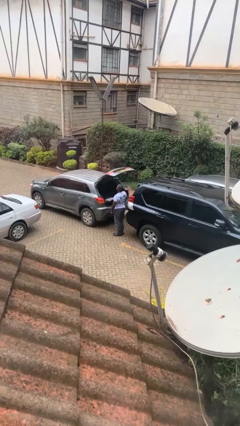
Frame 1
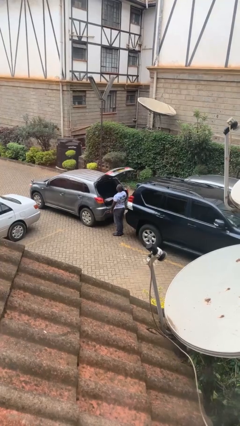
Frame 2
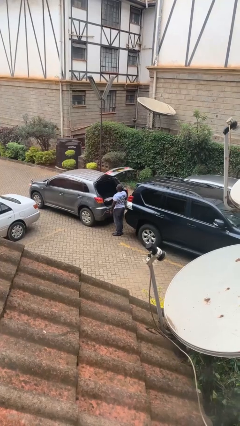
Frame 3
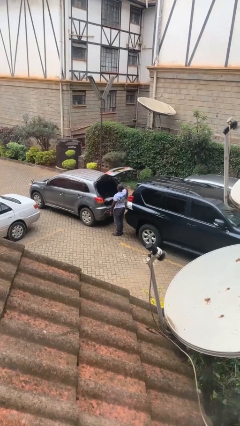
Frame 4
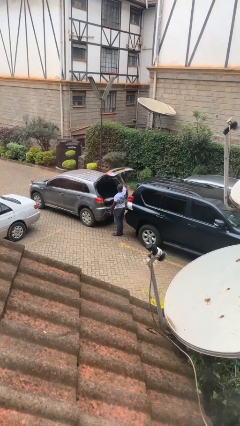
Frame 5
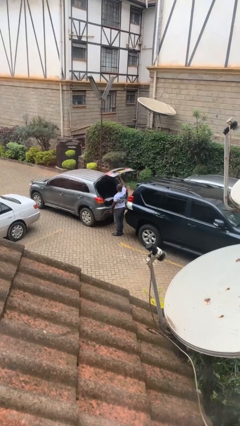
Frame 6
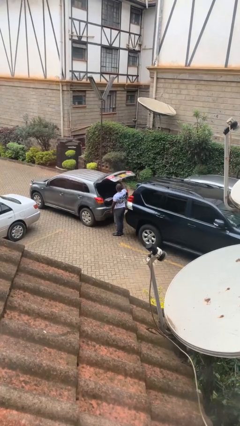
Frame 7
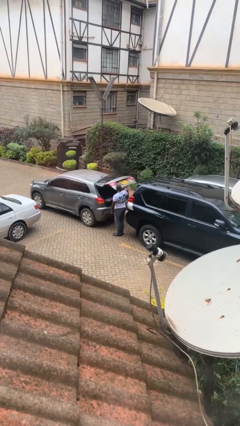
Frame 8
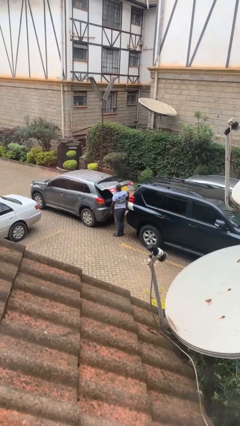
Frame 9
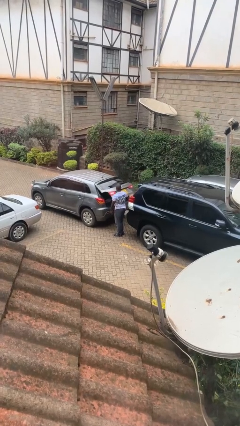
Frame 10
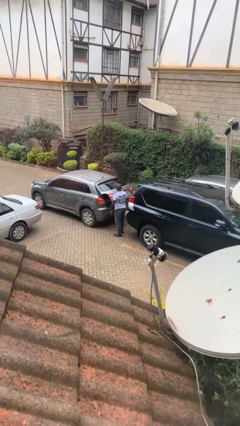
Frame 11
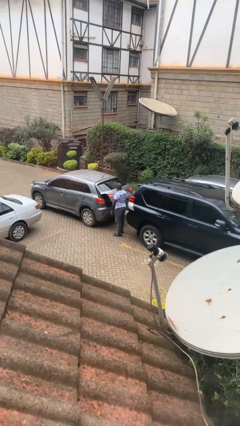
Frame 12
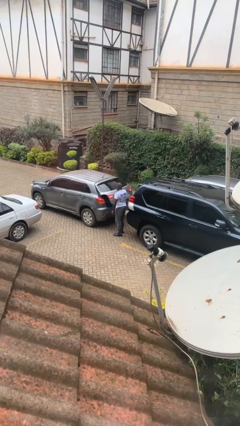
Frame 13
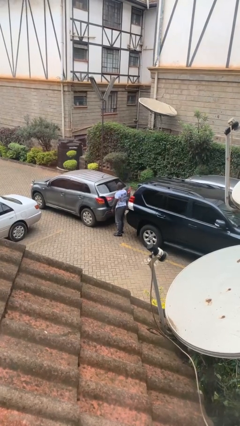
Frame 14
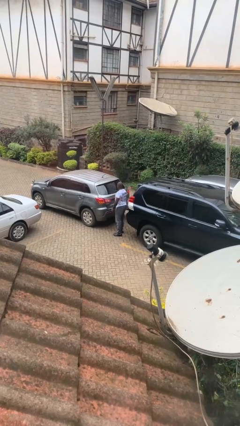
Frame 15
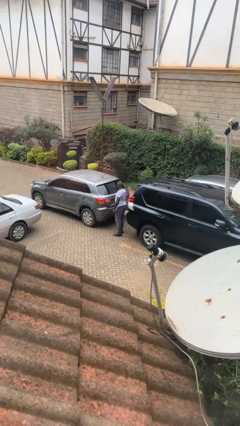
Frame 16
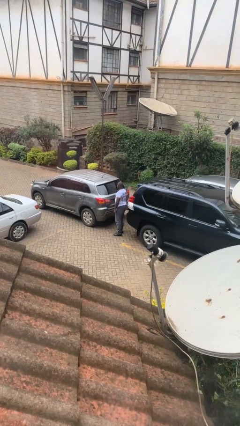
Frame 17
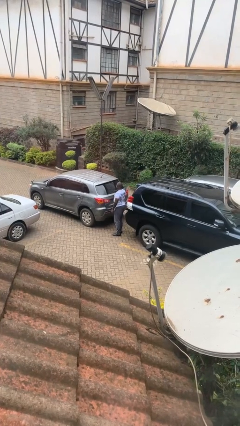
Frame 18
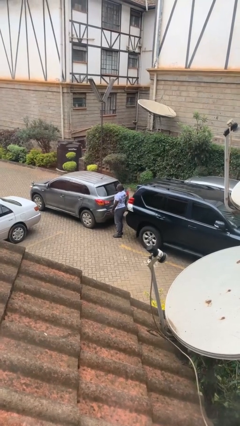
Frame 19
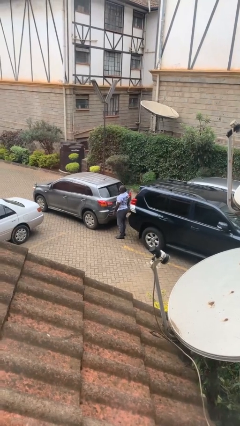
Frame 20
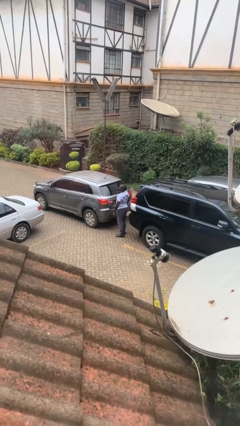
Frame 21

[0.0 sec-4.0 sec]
person closes car trunk

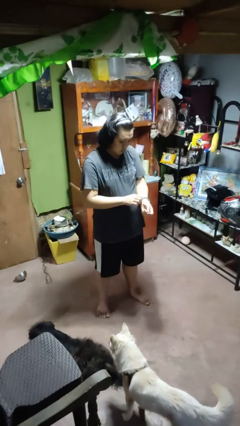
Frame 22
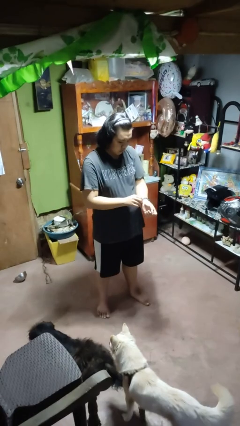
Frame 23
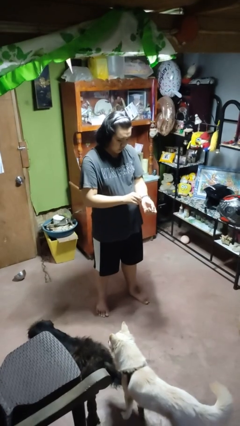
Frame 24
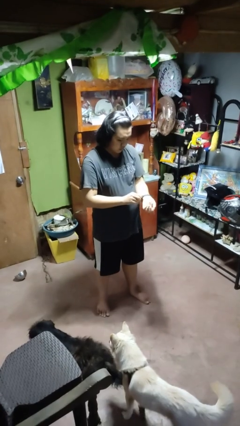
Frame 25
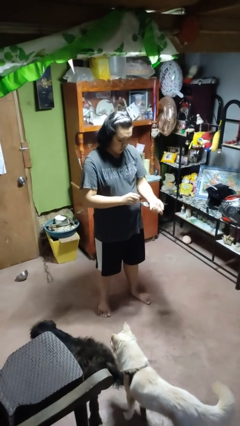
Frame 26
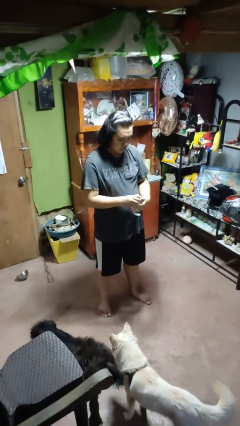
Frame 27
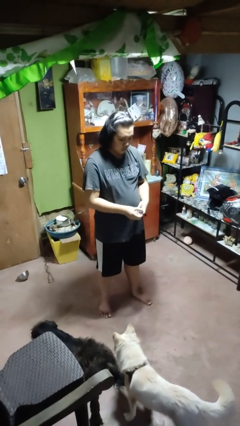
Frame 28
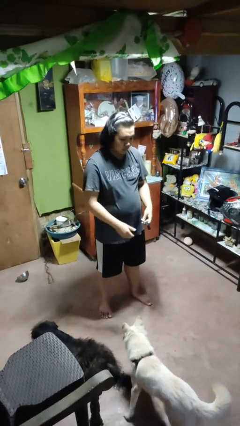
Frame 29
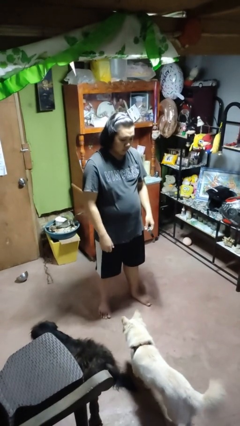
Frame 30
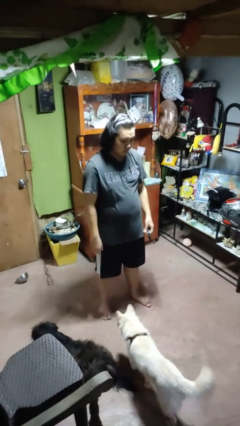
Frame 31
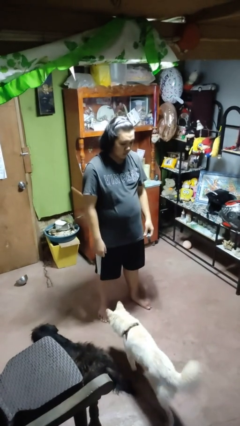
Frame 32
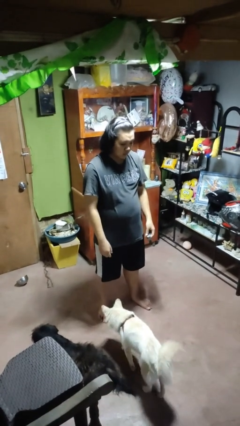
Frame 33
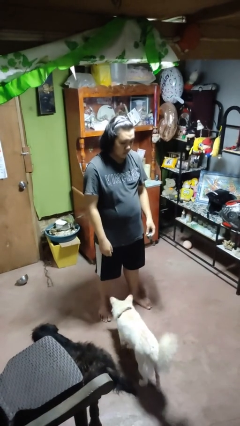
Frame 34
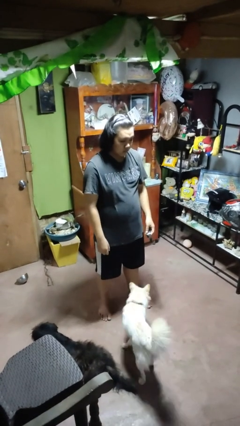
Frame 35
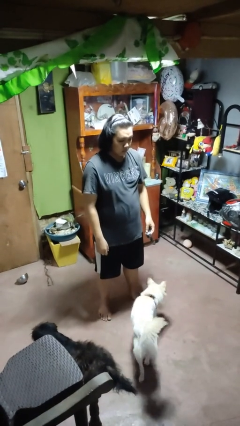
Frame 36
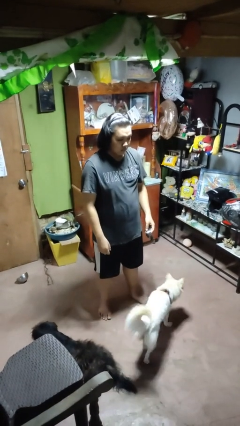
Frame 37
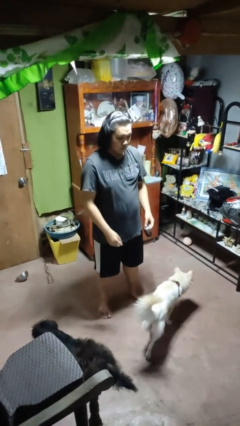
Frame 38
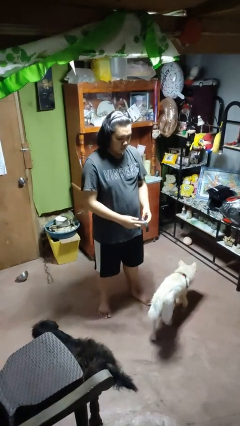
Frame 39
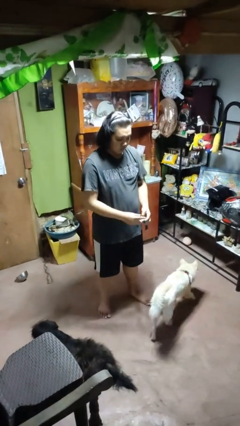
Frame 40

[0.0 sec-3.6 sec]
person takes off wristwatch

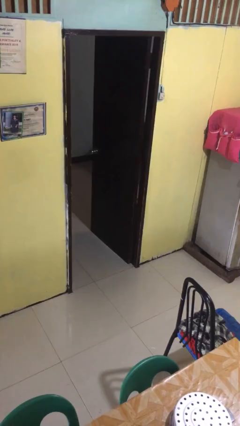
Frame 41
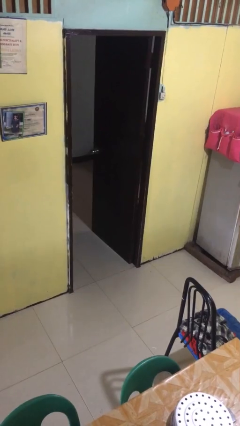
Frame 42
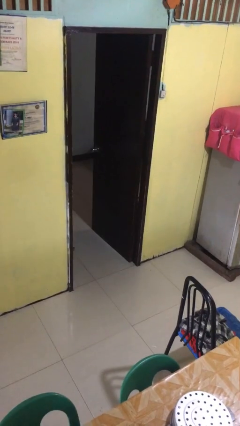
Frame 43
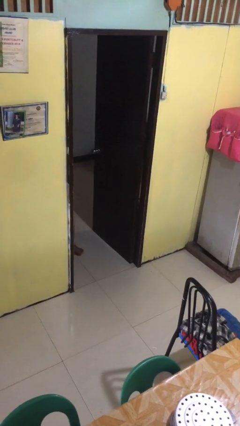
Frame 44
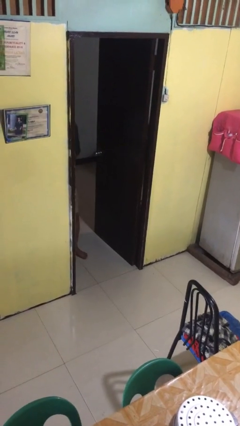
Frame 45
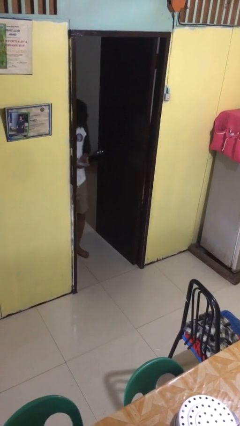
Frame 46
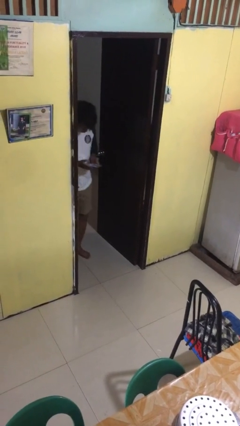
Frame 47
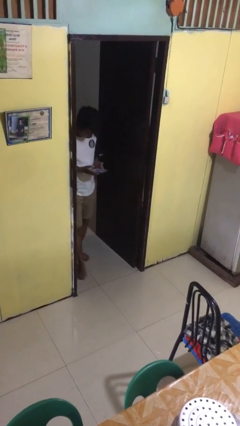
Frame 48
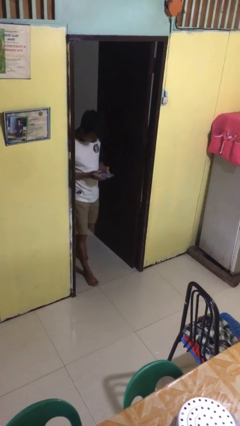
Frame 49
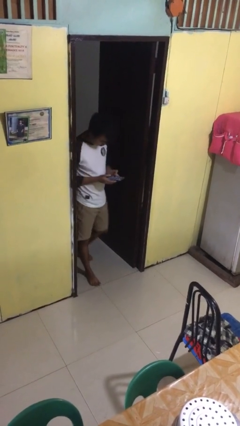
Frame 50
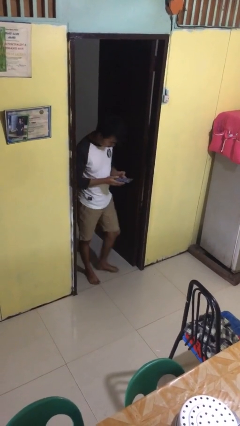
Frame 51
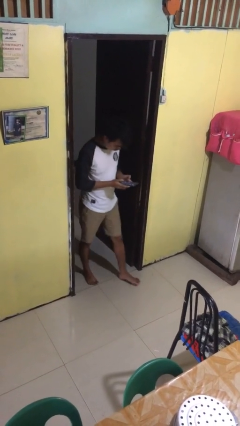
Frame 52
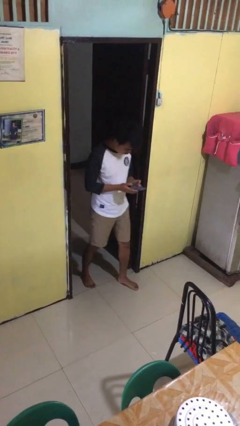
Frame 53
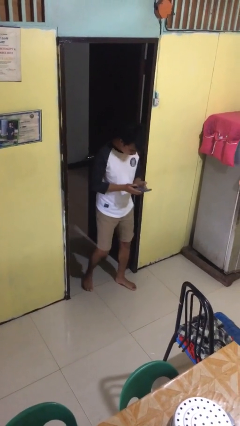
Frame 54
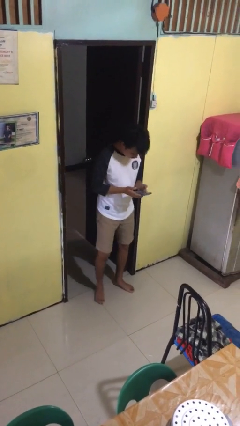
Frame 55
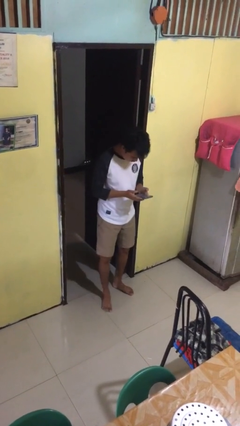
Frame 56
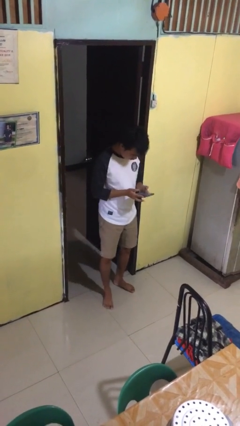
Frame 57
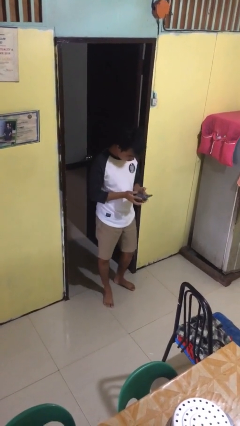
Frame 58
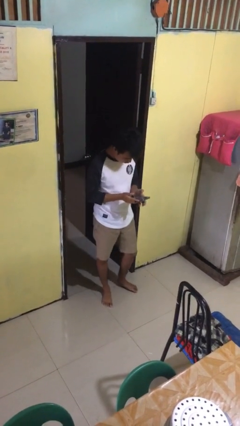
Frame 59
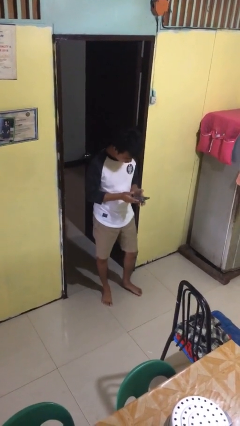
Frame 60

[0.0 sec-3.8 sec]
person enters scene through structure

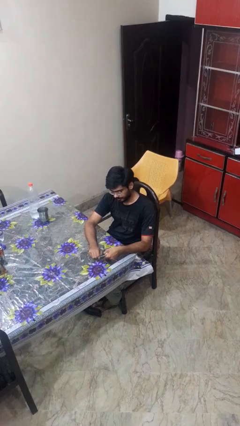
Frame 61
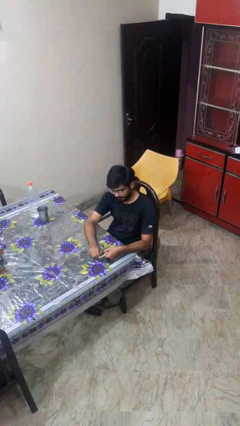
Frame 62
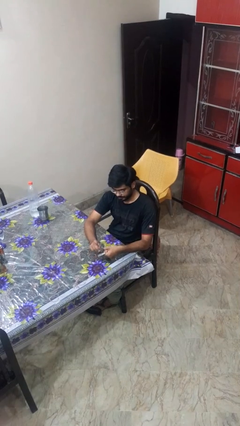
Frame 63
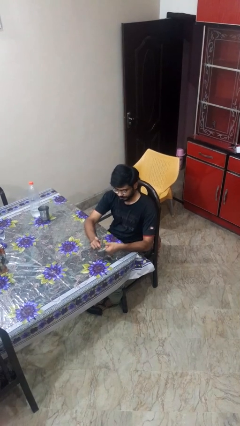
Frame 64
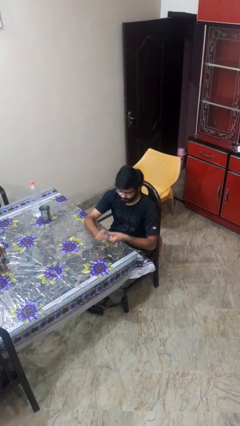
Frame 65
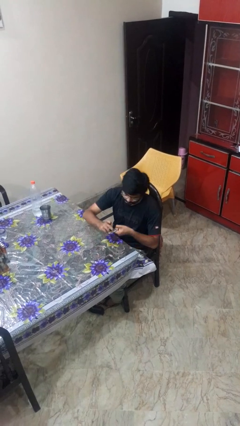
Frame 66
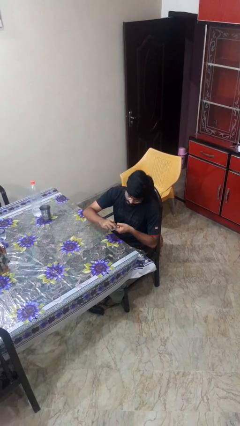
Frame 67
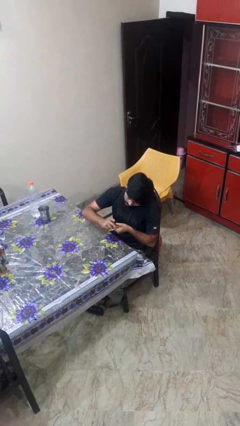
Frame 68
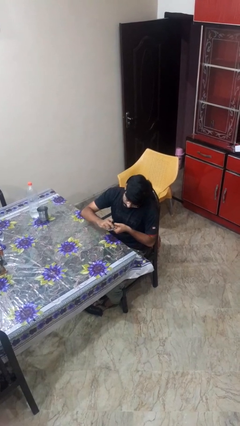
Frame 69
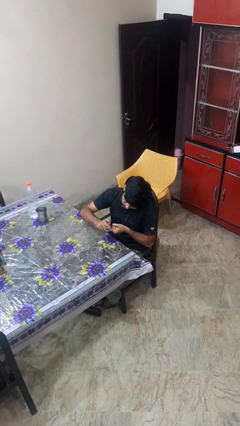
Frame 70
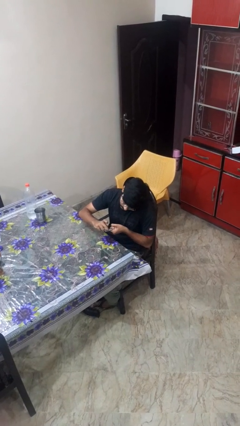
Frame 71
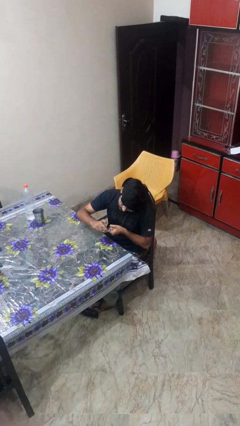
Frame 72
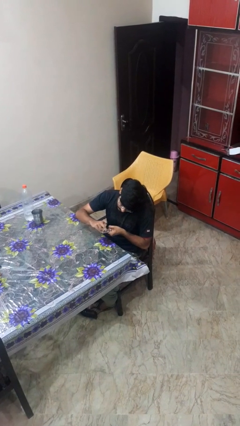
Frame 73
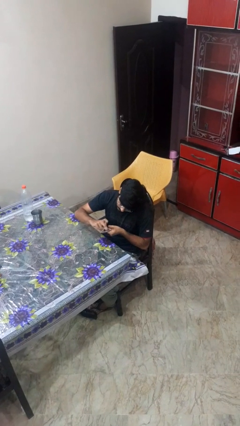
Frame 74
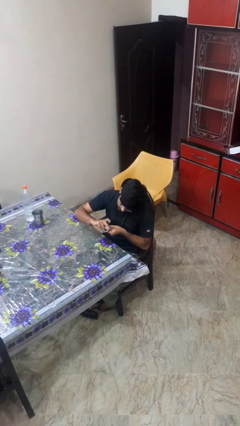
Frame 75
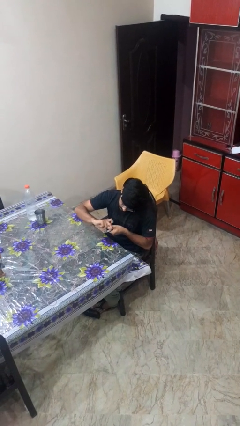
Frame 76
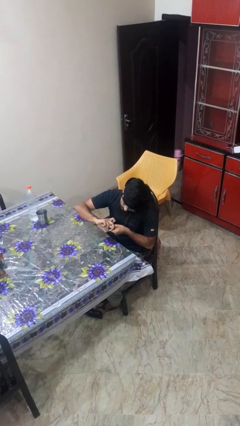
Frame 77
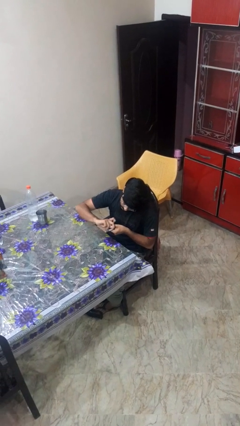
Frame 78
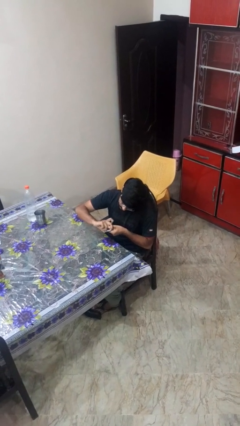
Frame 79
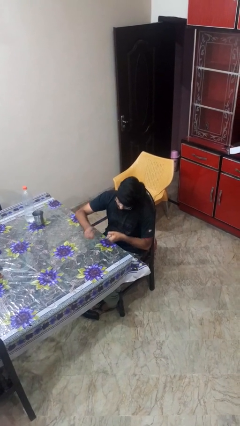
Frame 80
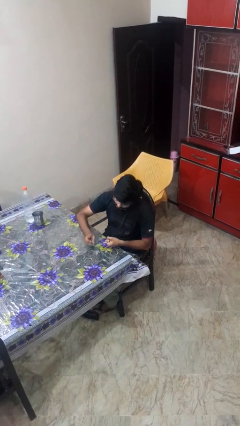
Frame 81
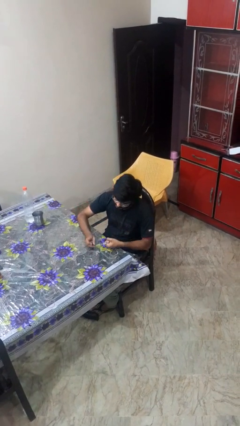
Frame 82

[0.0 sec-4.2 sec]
person files fingernails

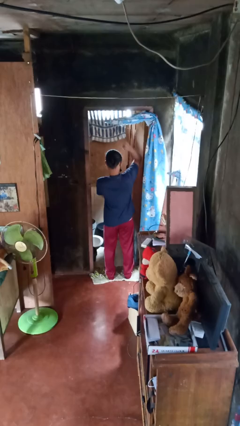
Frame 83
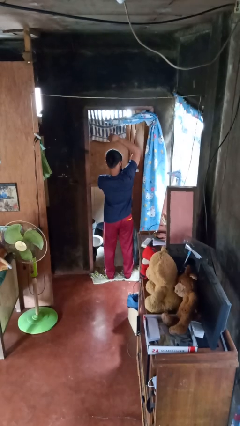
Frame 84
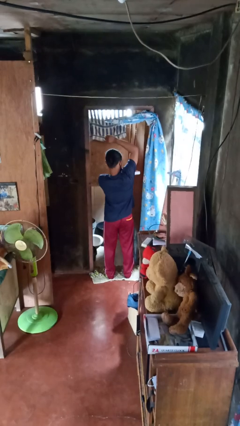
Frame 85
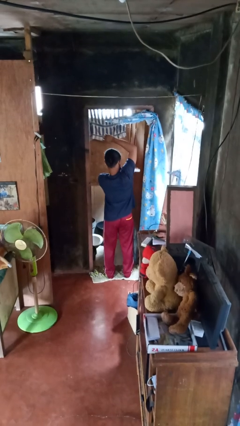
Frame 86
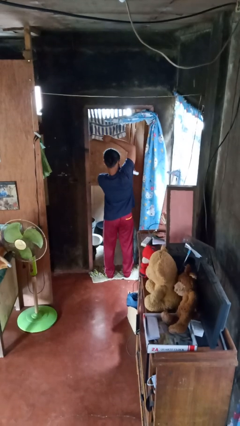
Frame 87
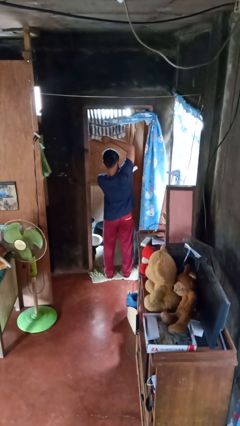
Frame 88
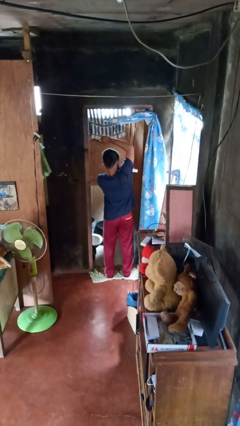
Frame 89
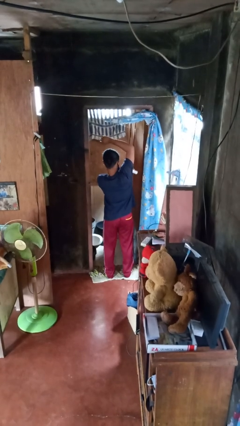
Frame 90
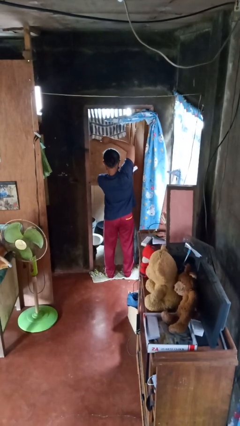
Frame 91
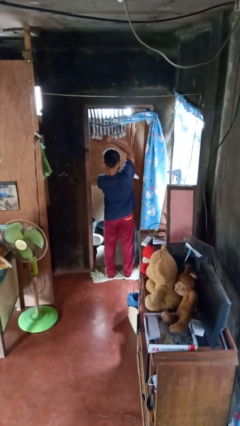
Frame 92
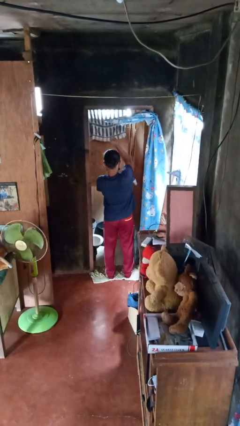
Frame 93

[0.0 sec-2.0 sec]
person applies deodorant

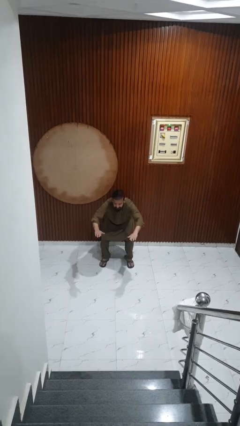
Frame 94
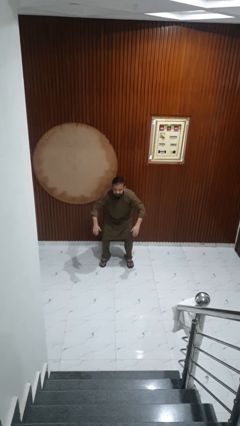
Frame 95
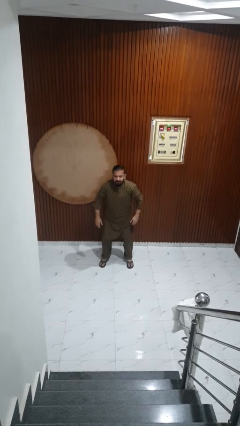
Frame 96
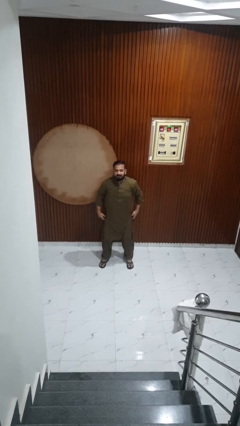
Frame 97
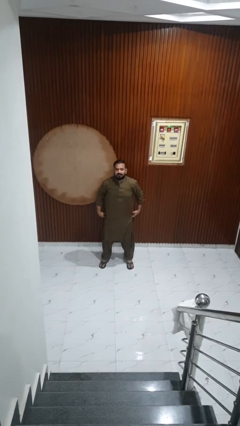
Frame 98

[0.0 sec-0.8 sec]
person stands up
